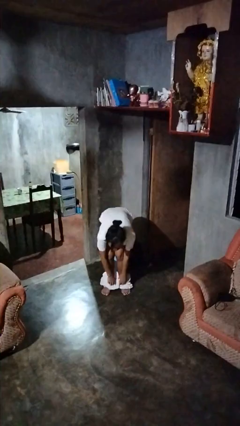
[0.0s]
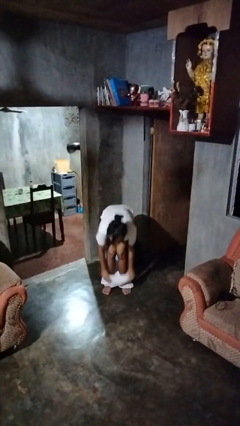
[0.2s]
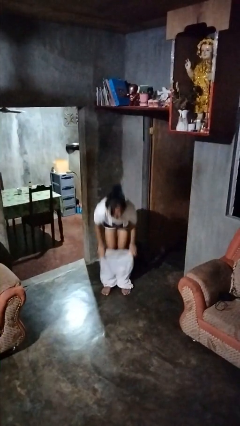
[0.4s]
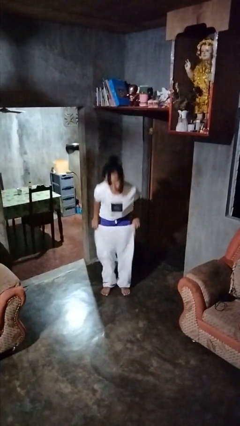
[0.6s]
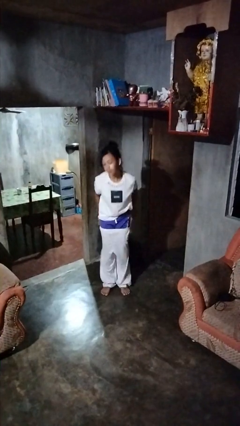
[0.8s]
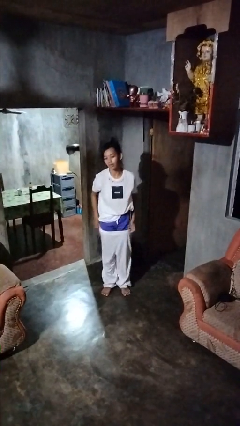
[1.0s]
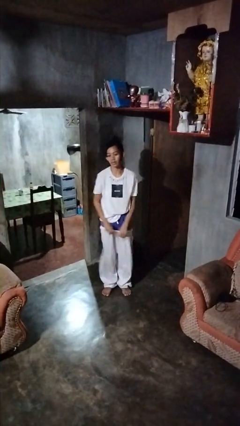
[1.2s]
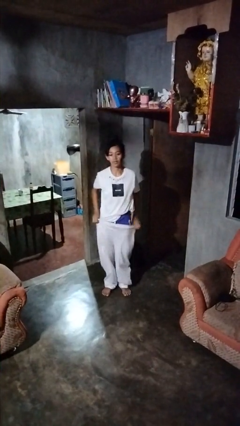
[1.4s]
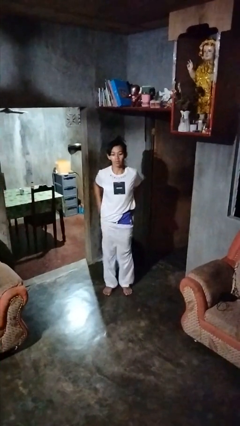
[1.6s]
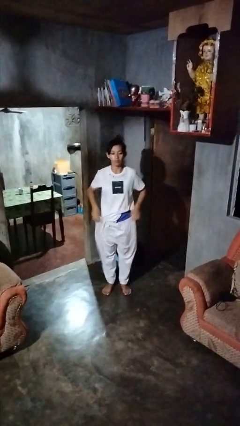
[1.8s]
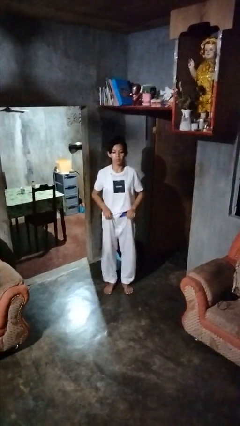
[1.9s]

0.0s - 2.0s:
person puts on pants

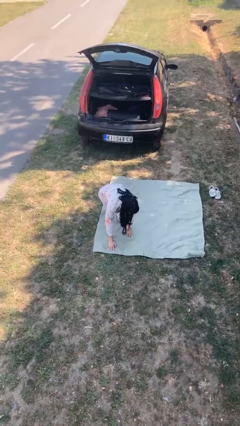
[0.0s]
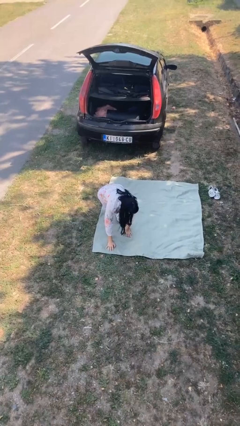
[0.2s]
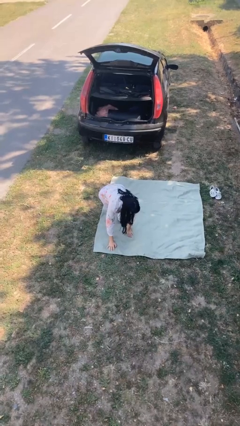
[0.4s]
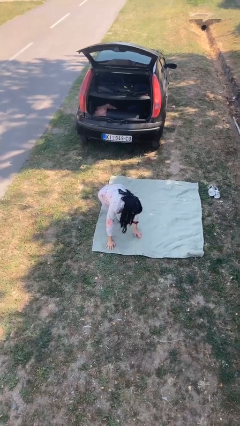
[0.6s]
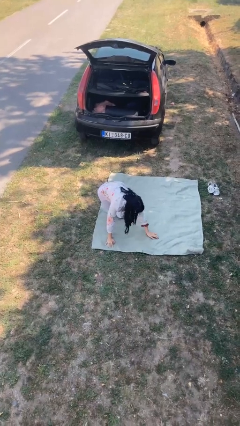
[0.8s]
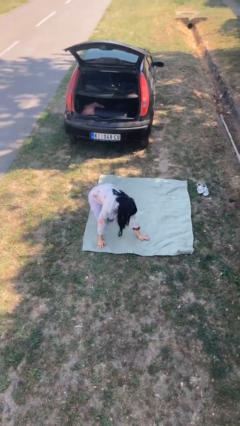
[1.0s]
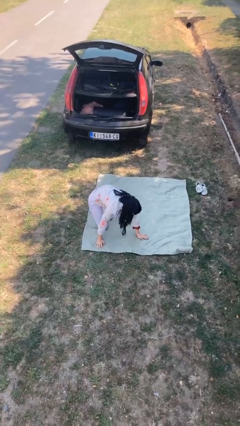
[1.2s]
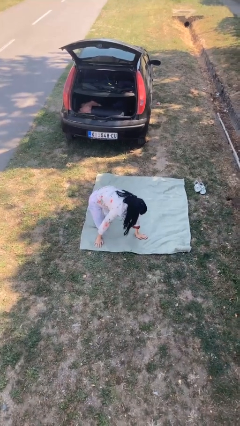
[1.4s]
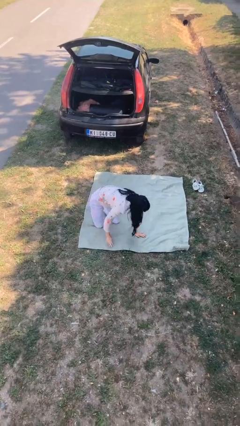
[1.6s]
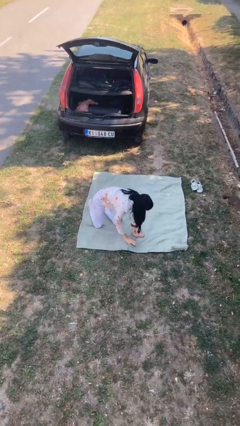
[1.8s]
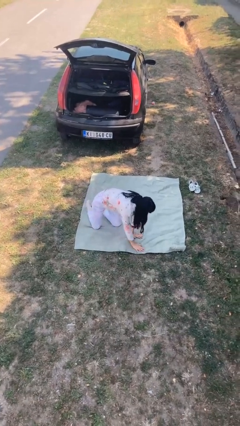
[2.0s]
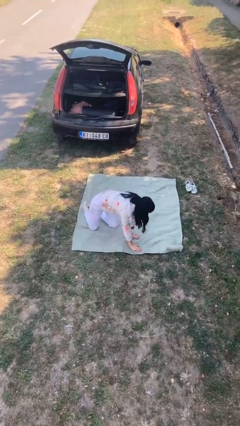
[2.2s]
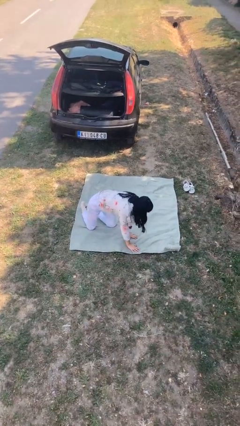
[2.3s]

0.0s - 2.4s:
person crawls

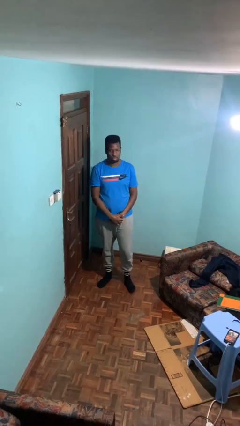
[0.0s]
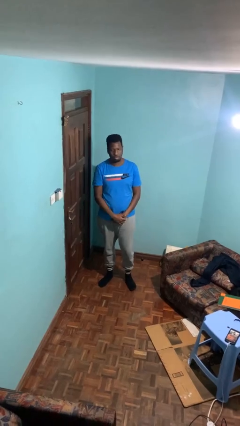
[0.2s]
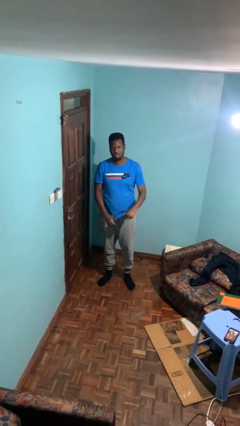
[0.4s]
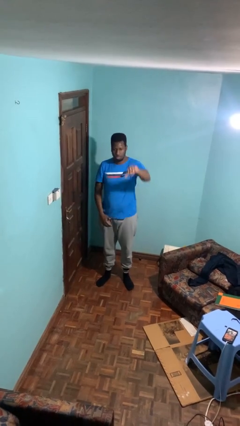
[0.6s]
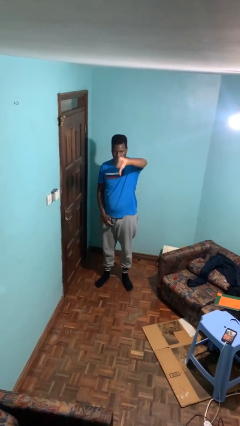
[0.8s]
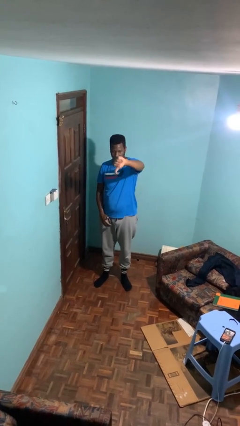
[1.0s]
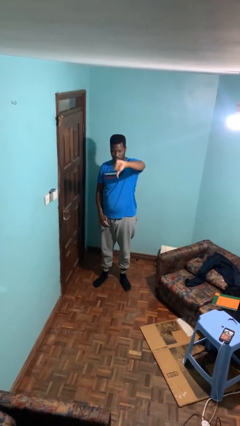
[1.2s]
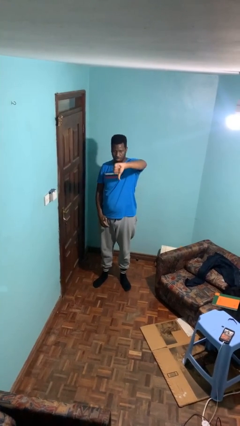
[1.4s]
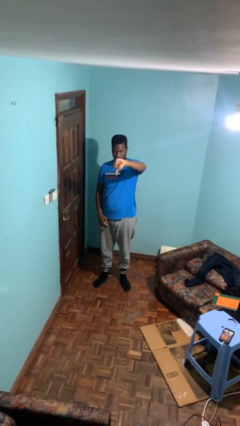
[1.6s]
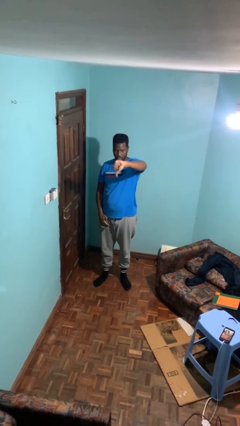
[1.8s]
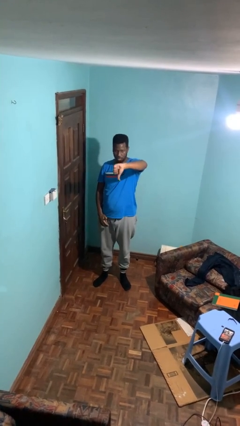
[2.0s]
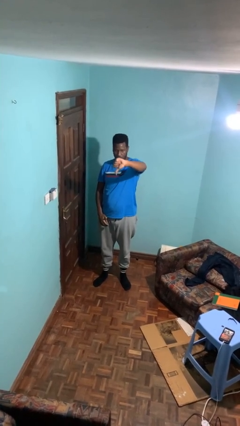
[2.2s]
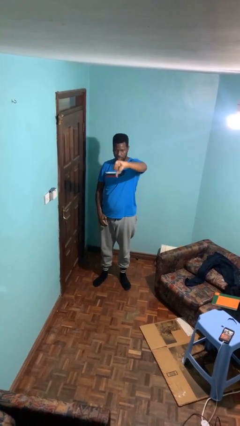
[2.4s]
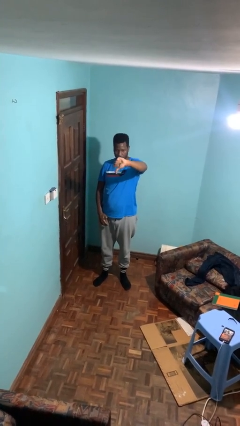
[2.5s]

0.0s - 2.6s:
person gestures thumbs down

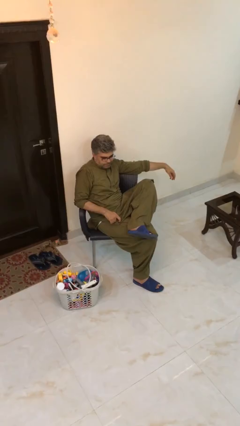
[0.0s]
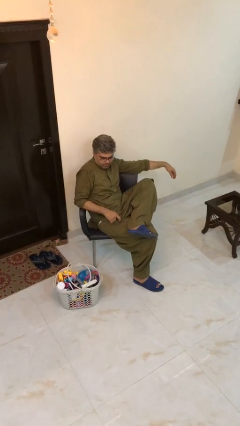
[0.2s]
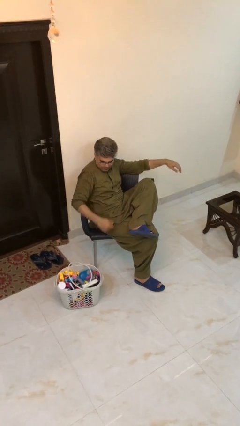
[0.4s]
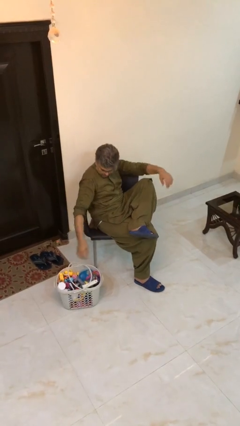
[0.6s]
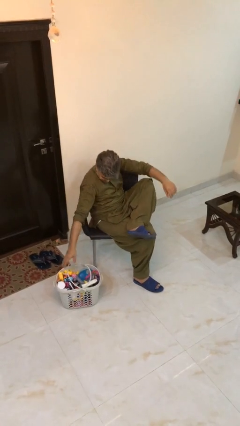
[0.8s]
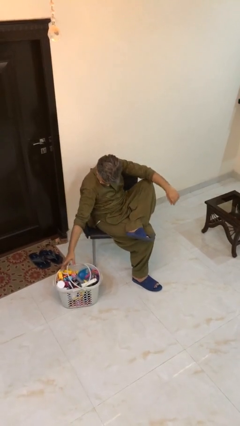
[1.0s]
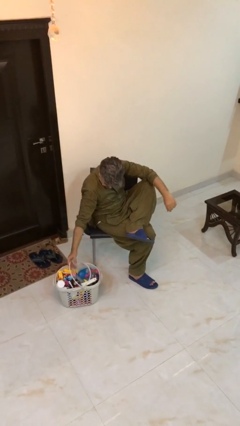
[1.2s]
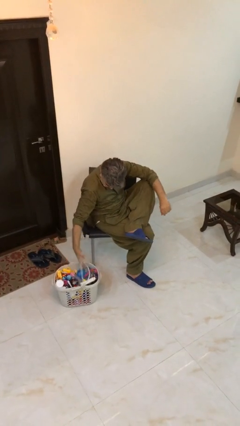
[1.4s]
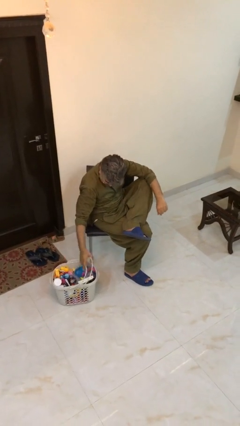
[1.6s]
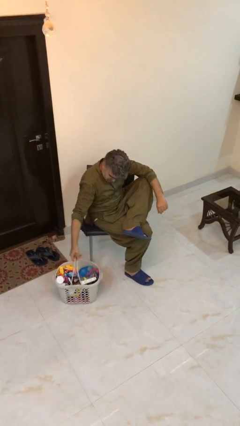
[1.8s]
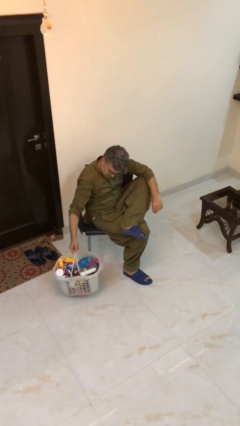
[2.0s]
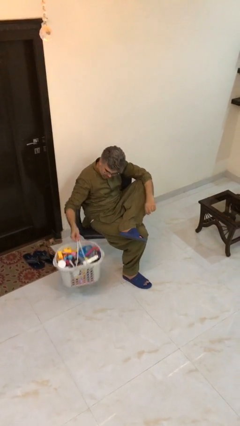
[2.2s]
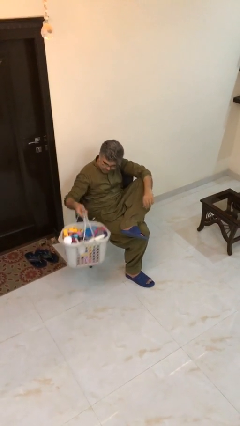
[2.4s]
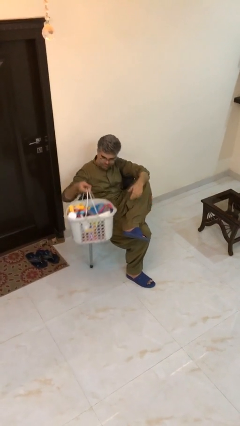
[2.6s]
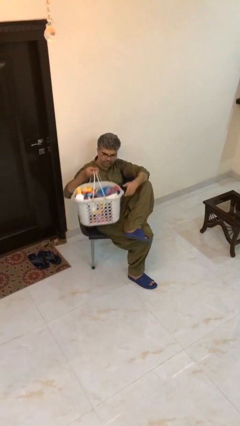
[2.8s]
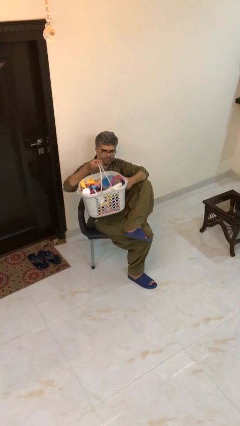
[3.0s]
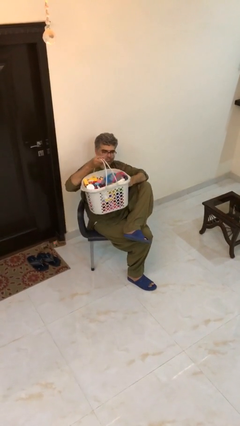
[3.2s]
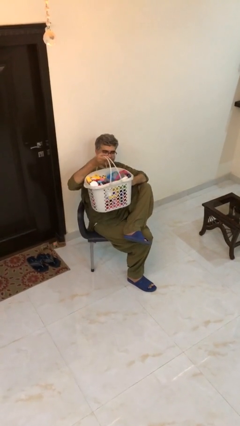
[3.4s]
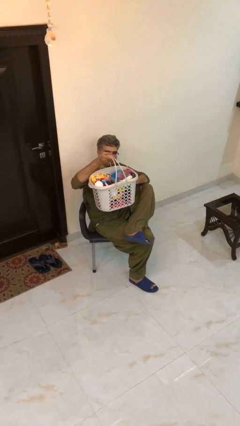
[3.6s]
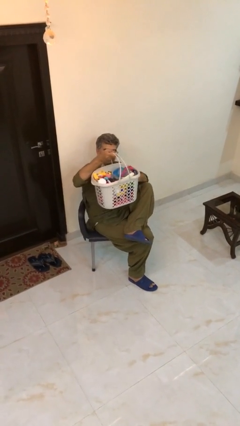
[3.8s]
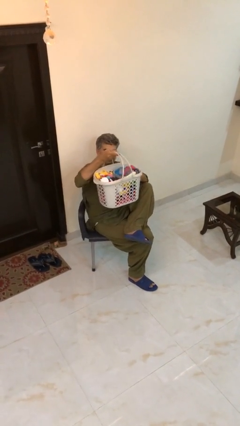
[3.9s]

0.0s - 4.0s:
person picks up object from floor

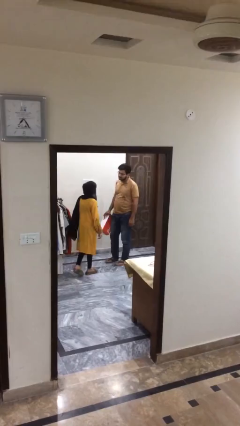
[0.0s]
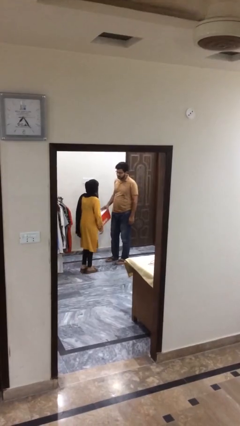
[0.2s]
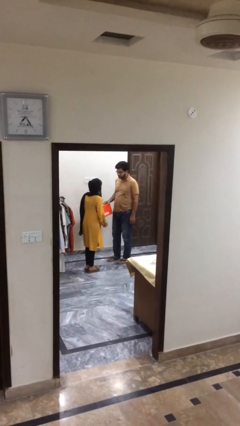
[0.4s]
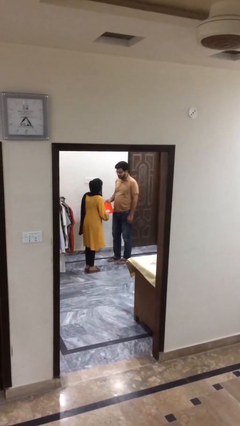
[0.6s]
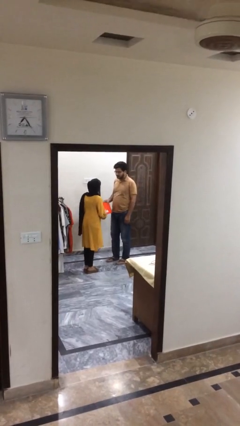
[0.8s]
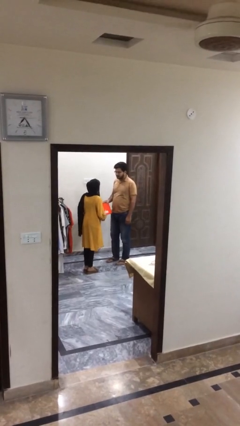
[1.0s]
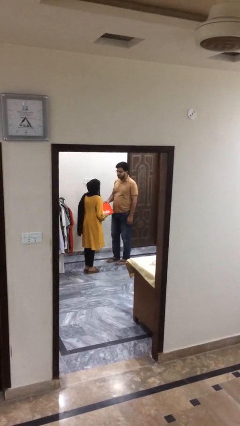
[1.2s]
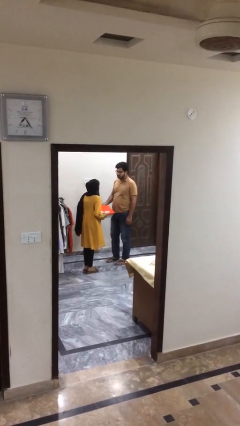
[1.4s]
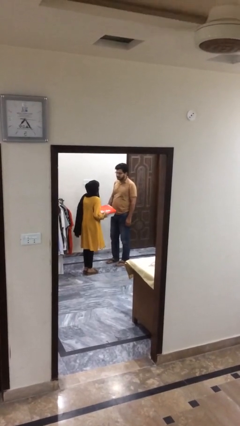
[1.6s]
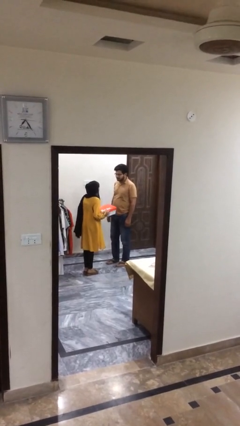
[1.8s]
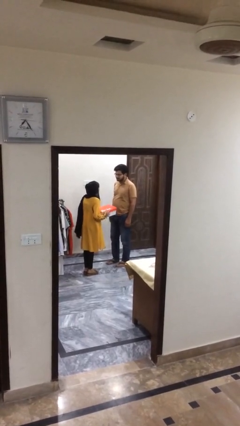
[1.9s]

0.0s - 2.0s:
person transfers object to person

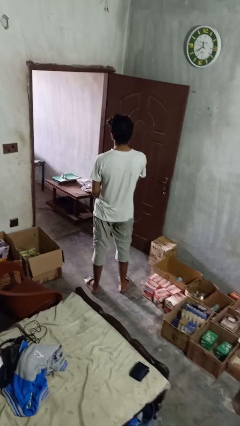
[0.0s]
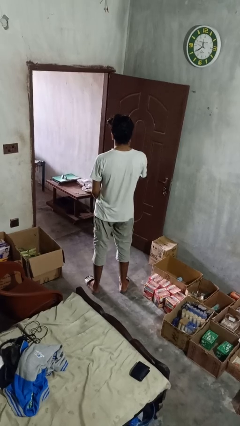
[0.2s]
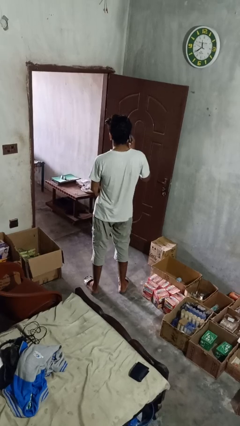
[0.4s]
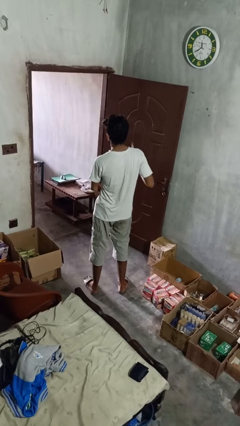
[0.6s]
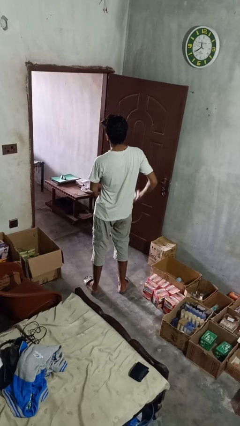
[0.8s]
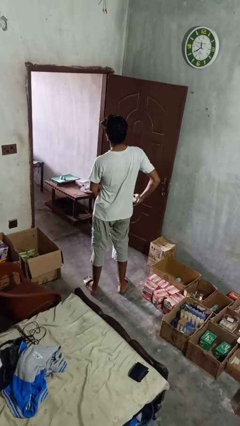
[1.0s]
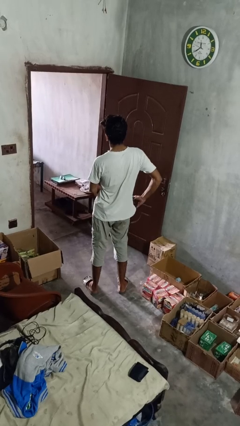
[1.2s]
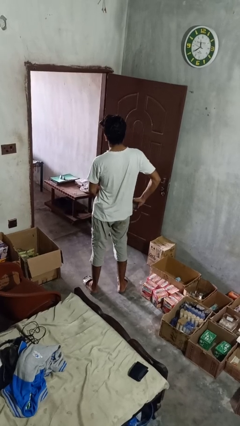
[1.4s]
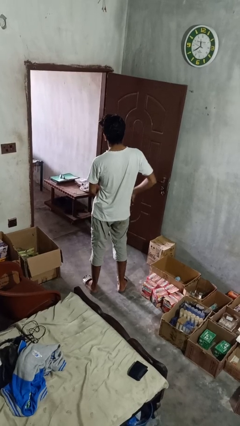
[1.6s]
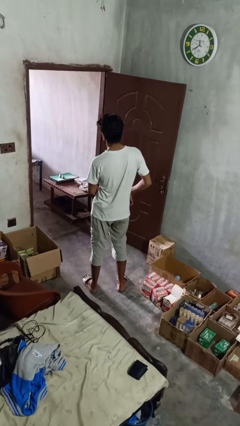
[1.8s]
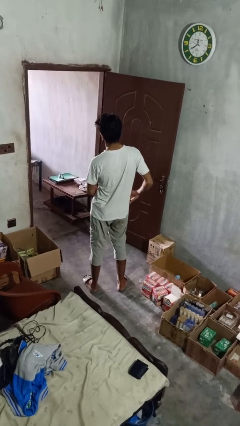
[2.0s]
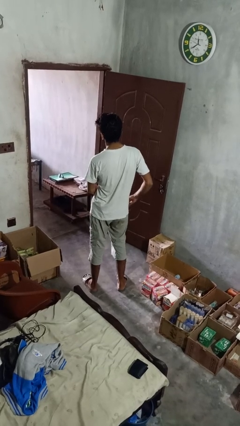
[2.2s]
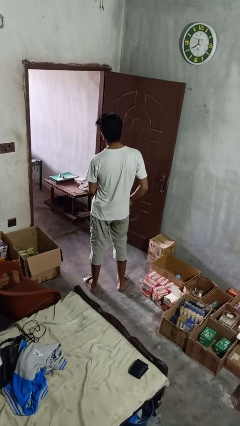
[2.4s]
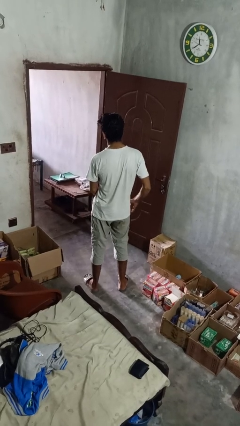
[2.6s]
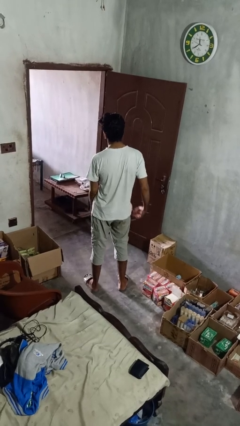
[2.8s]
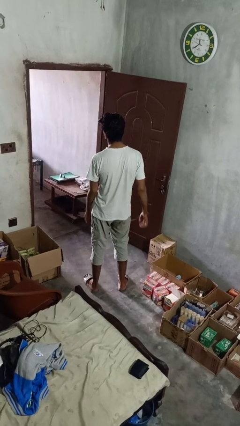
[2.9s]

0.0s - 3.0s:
person puts phone into pocket

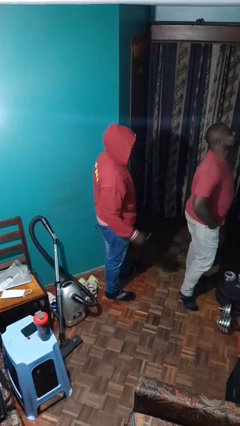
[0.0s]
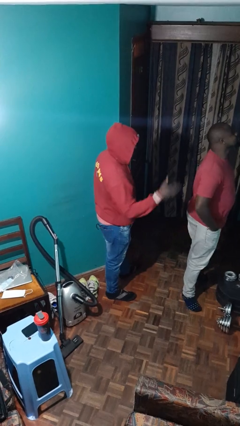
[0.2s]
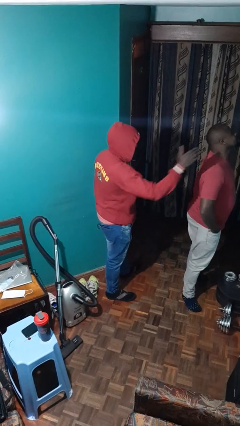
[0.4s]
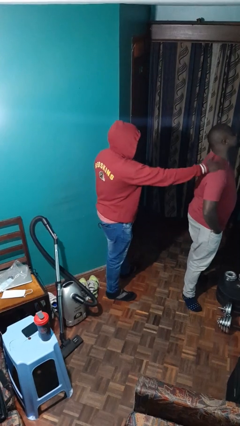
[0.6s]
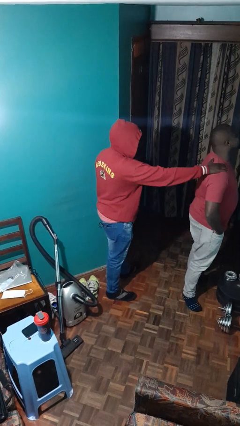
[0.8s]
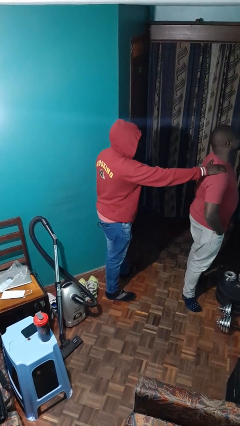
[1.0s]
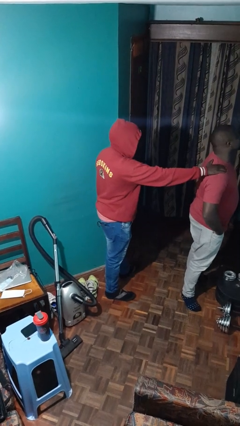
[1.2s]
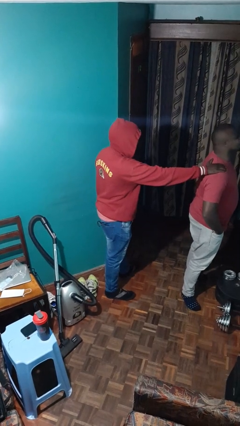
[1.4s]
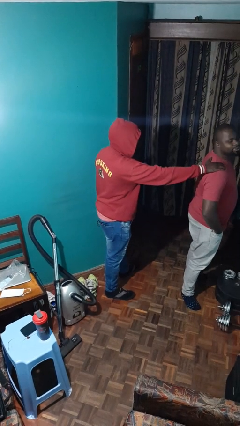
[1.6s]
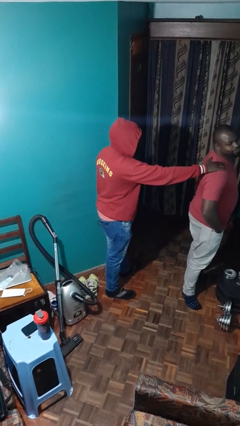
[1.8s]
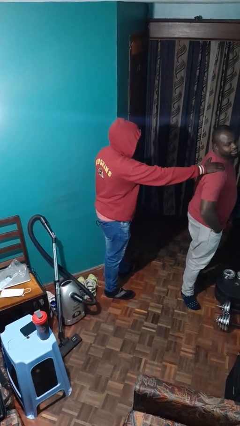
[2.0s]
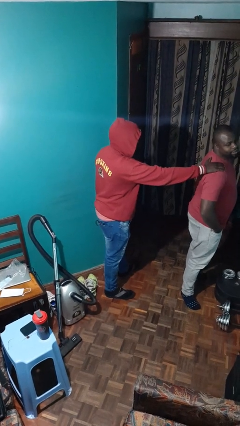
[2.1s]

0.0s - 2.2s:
person grabs person by shoulder
